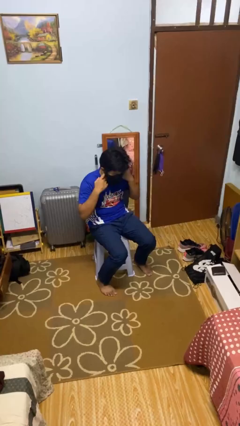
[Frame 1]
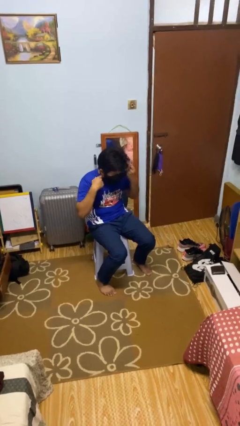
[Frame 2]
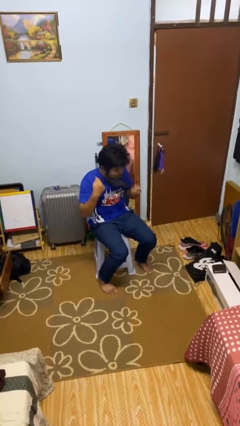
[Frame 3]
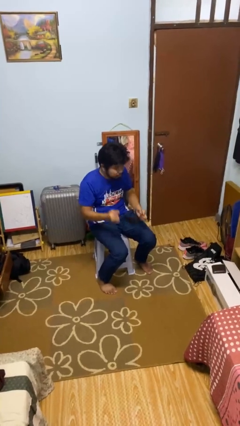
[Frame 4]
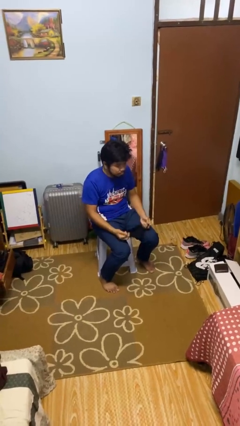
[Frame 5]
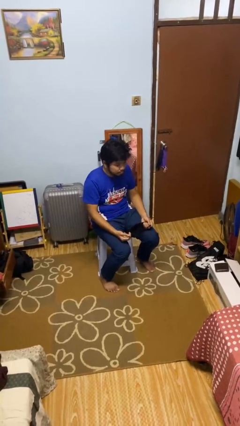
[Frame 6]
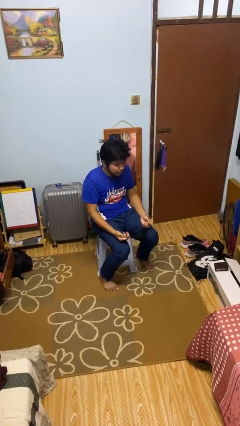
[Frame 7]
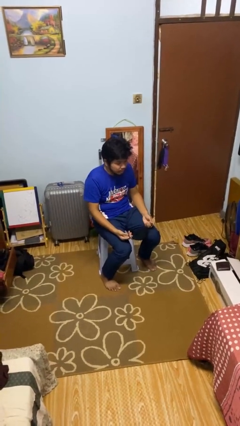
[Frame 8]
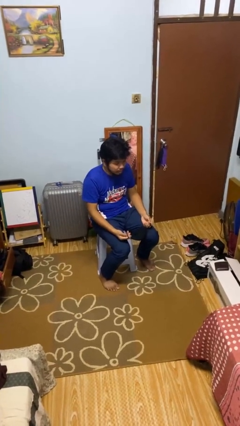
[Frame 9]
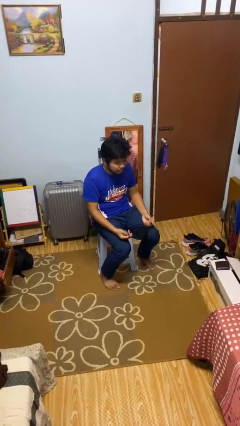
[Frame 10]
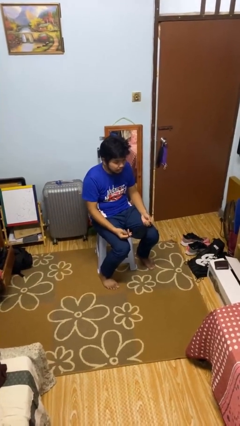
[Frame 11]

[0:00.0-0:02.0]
person takes off facemask

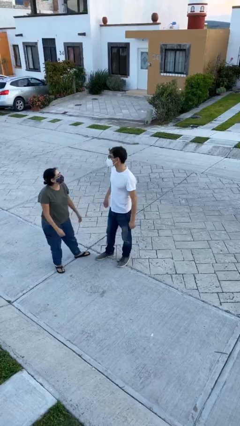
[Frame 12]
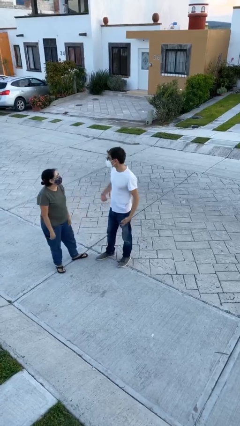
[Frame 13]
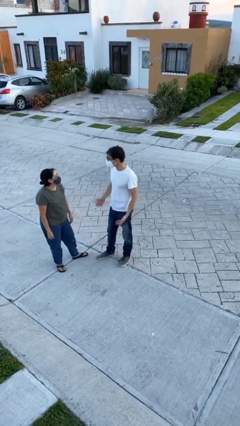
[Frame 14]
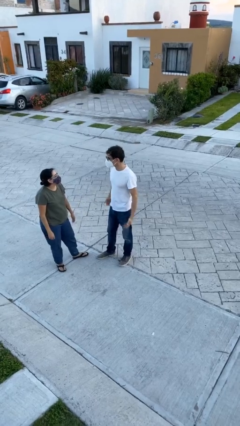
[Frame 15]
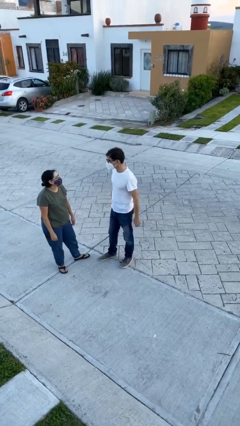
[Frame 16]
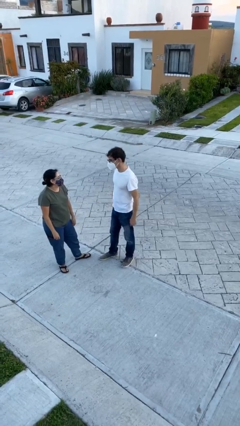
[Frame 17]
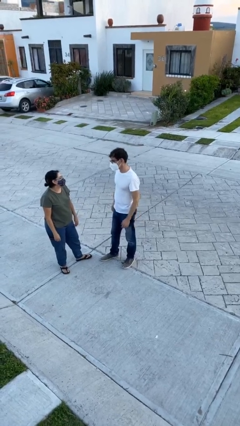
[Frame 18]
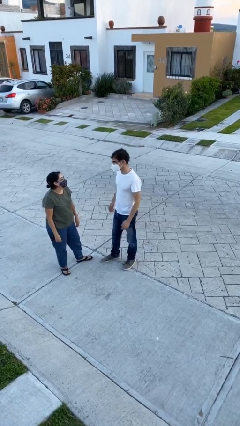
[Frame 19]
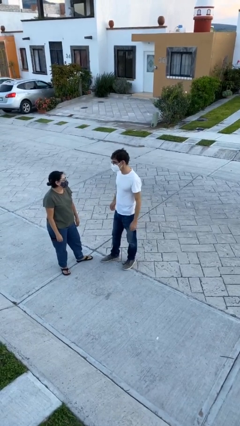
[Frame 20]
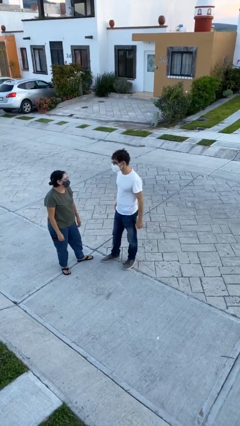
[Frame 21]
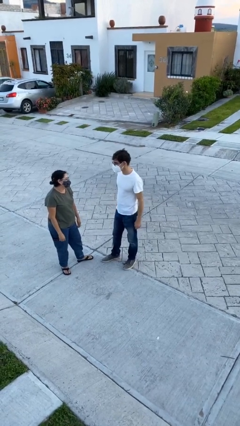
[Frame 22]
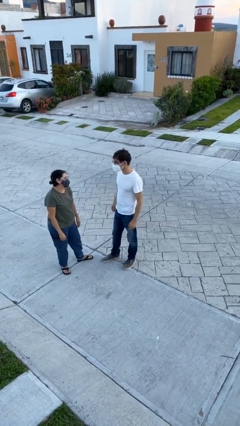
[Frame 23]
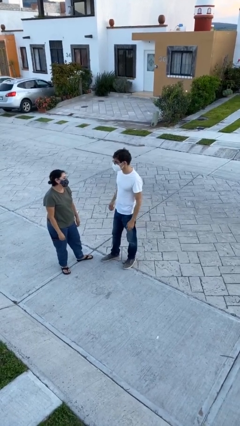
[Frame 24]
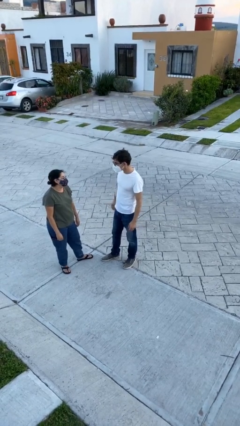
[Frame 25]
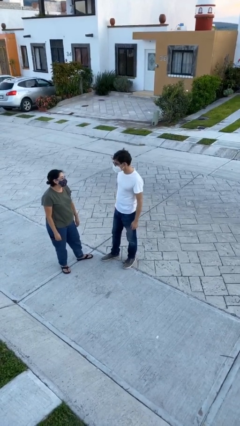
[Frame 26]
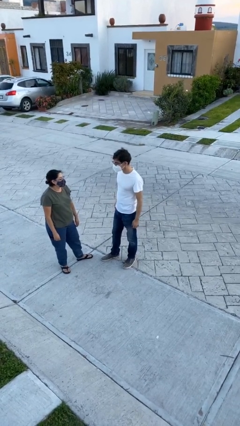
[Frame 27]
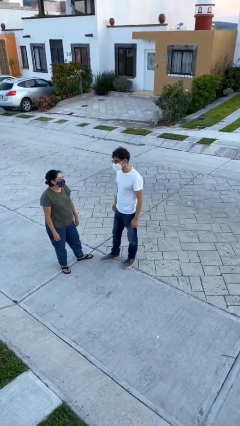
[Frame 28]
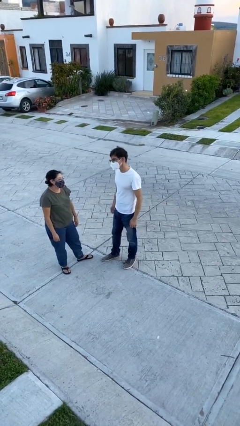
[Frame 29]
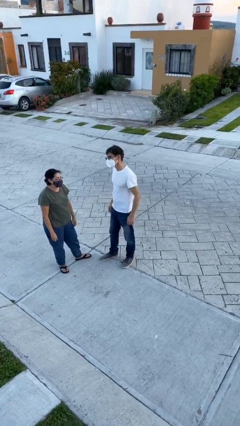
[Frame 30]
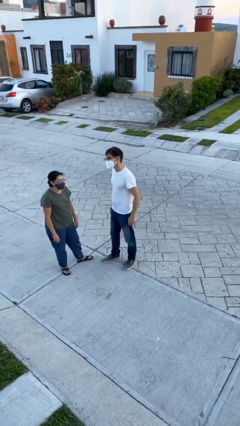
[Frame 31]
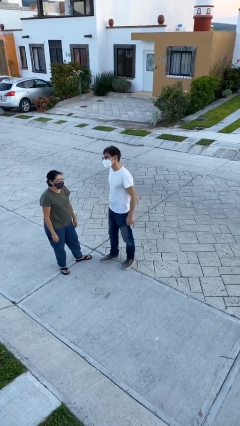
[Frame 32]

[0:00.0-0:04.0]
person talks to person

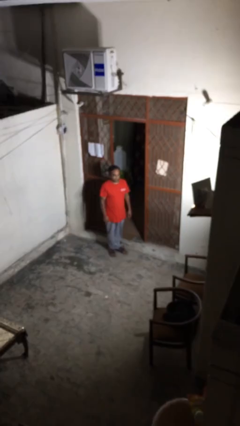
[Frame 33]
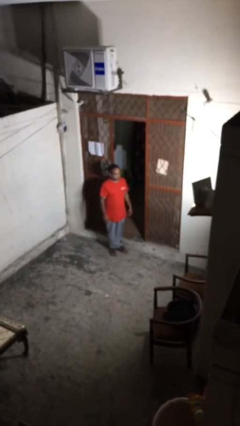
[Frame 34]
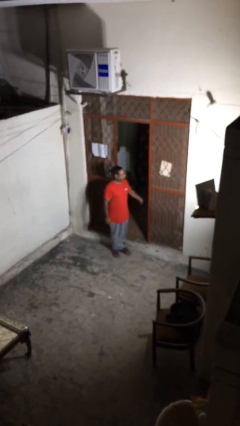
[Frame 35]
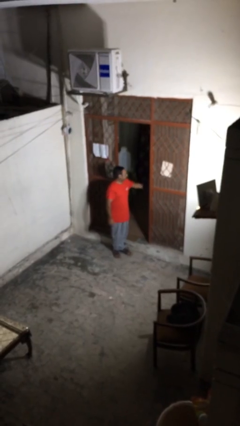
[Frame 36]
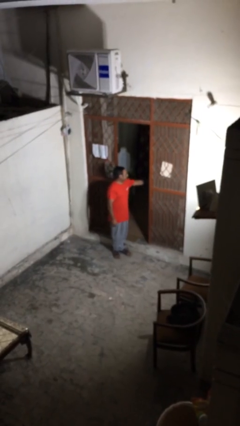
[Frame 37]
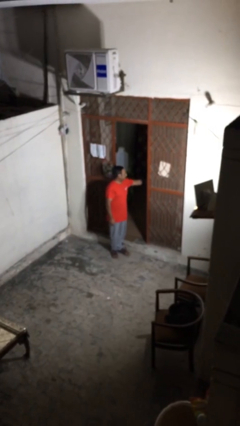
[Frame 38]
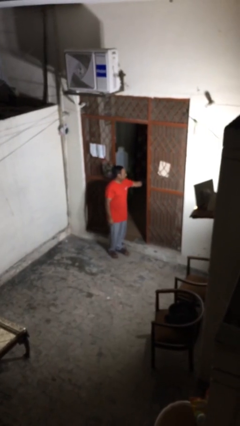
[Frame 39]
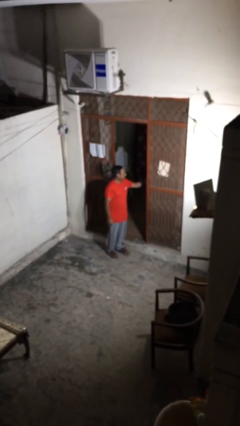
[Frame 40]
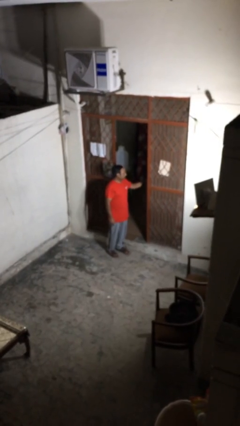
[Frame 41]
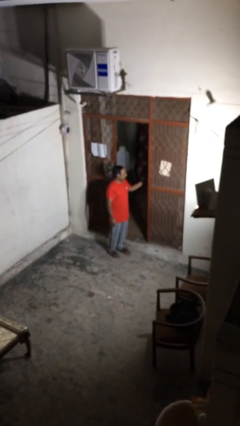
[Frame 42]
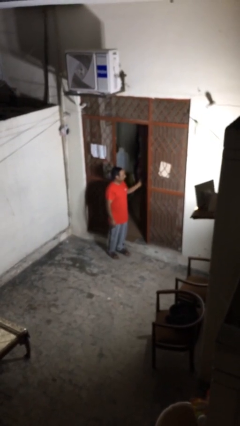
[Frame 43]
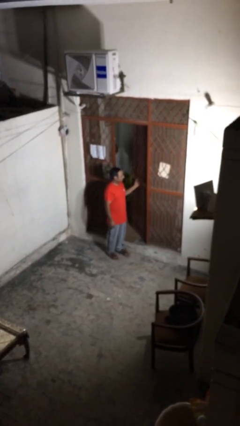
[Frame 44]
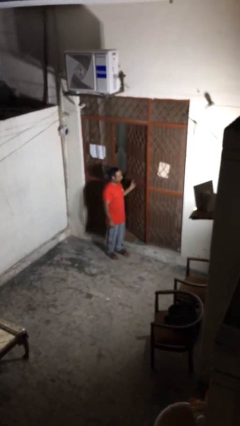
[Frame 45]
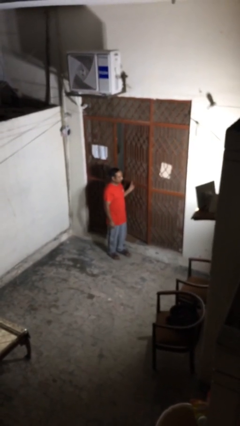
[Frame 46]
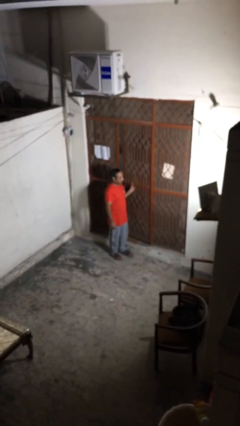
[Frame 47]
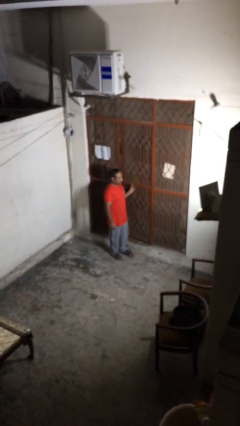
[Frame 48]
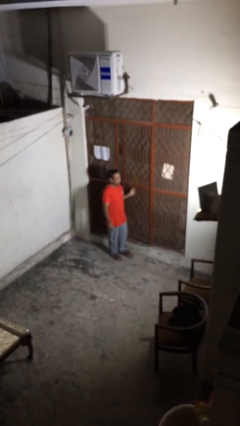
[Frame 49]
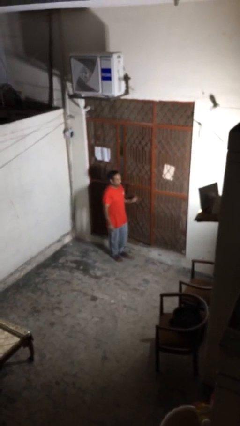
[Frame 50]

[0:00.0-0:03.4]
person closes facility door

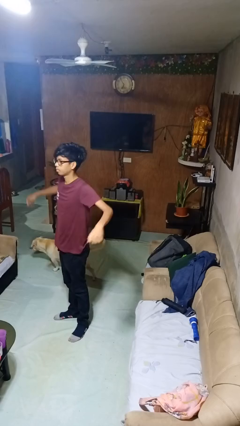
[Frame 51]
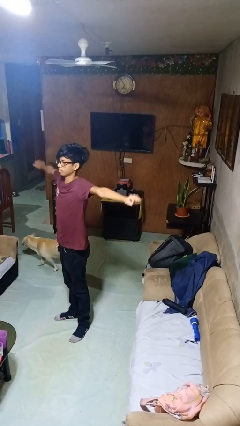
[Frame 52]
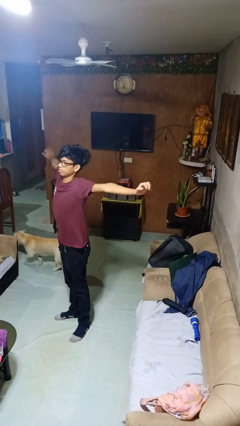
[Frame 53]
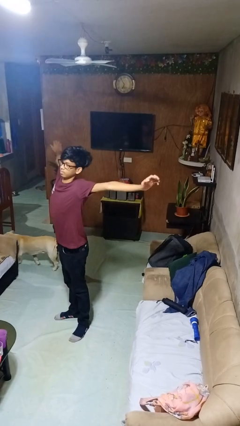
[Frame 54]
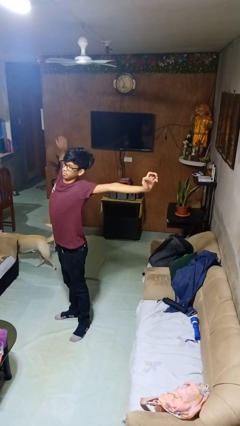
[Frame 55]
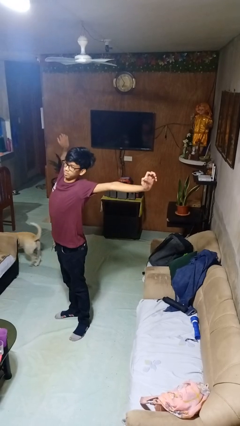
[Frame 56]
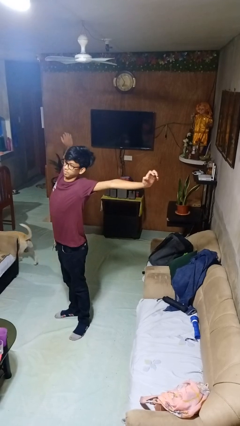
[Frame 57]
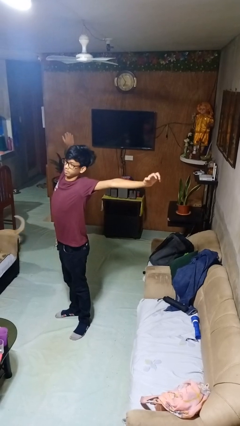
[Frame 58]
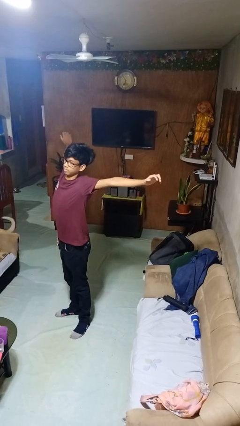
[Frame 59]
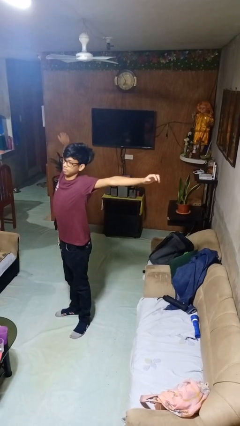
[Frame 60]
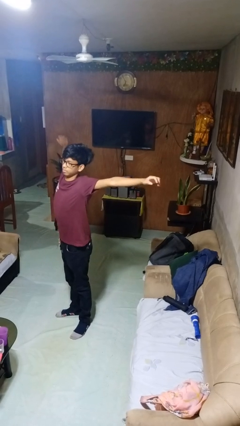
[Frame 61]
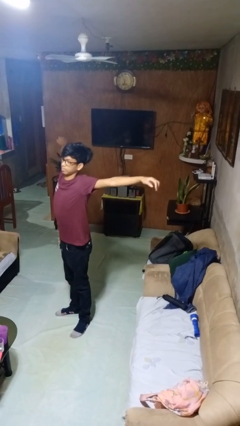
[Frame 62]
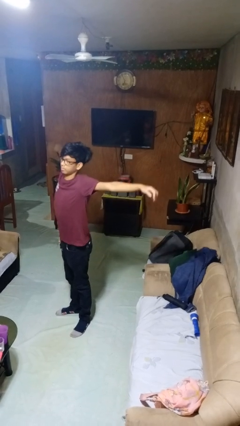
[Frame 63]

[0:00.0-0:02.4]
person stretches arms to side

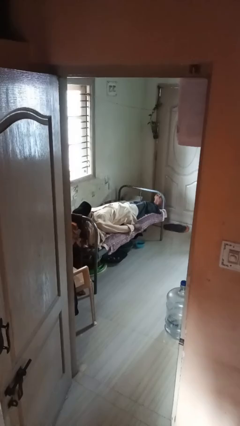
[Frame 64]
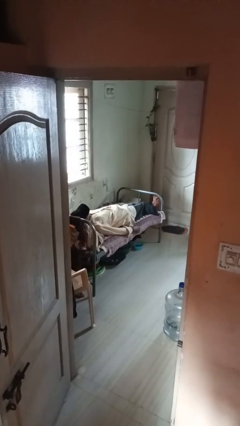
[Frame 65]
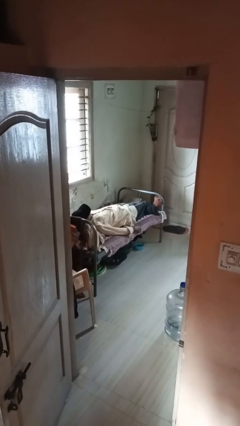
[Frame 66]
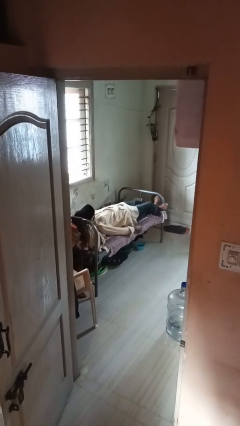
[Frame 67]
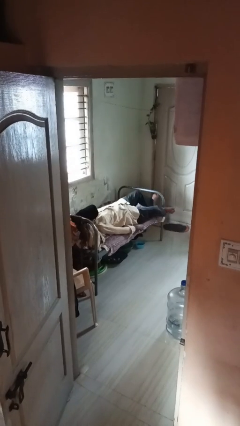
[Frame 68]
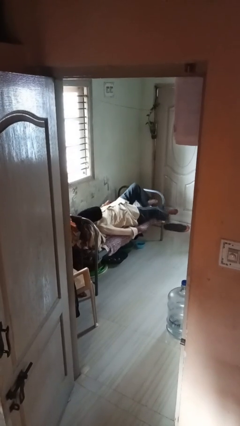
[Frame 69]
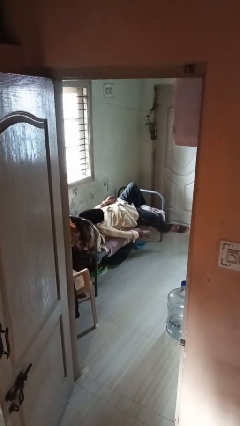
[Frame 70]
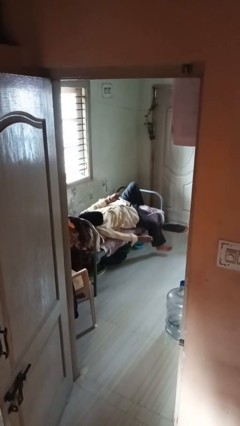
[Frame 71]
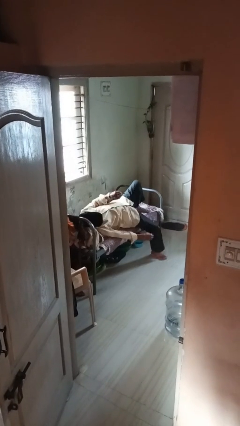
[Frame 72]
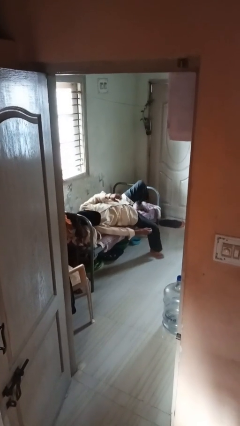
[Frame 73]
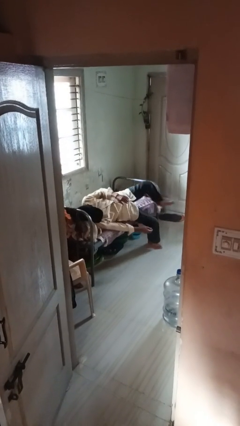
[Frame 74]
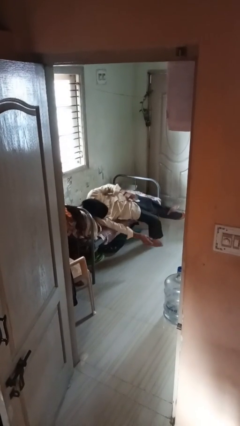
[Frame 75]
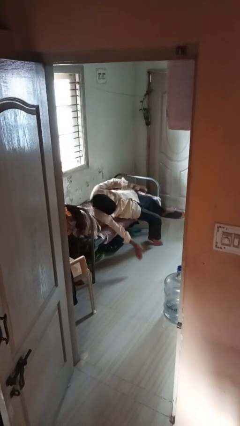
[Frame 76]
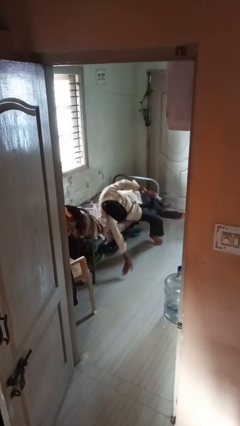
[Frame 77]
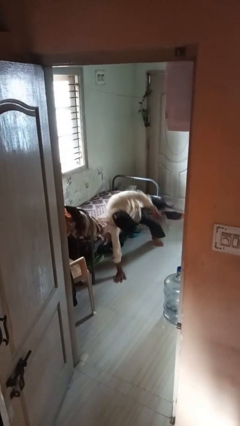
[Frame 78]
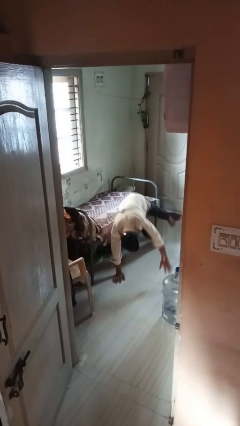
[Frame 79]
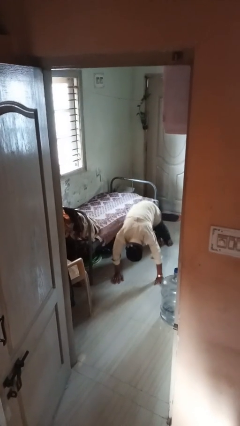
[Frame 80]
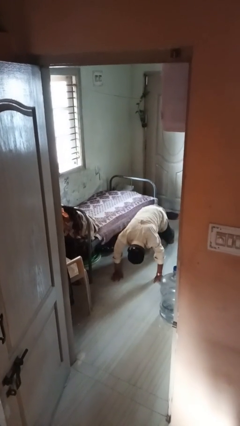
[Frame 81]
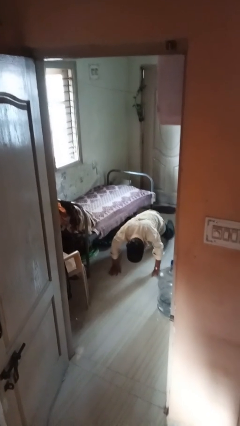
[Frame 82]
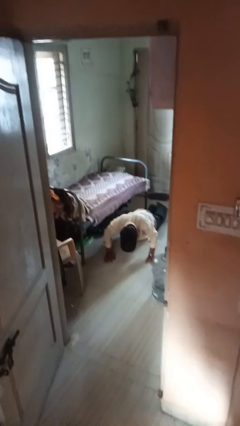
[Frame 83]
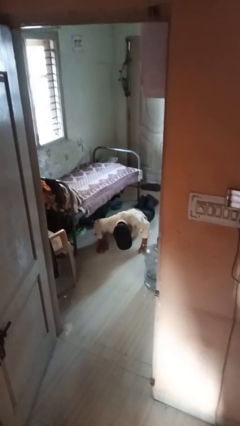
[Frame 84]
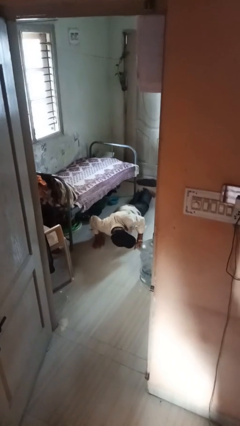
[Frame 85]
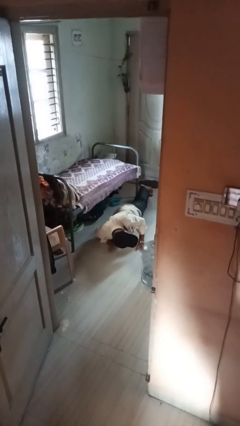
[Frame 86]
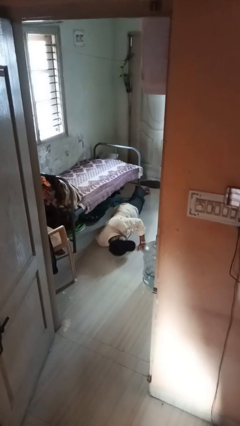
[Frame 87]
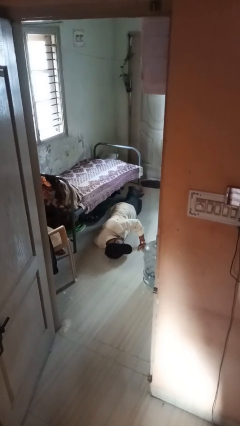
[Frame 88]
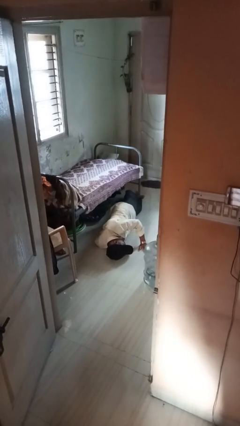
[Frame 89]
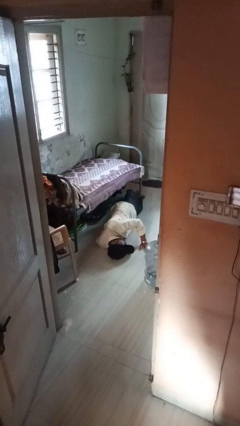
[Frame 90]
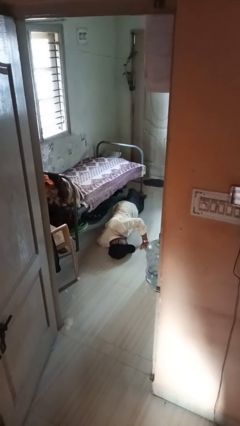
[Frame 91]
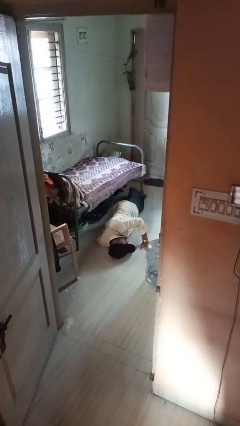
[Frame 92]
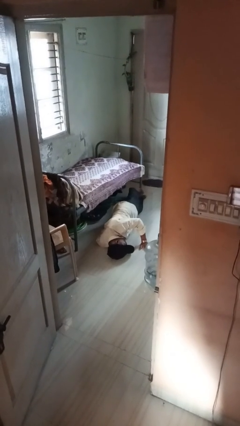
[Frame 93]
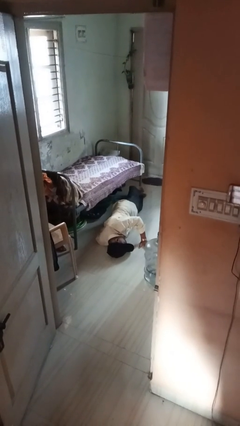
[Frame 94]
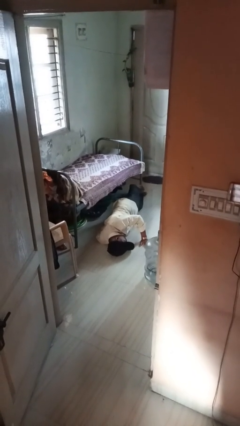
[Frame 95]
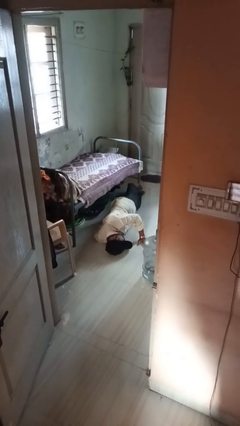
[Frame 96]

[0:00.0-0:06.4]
person falls from bed
